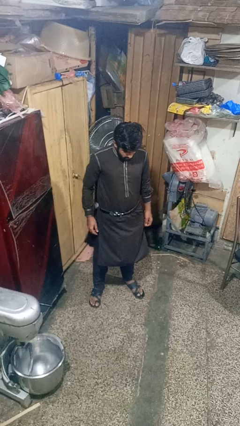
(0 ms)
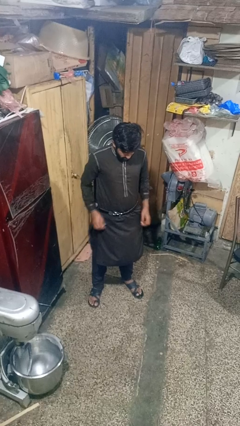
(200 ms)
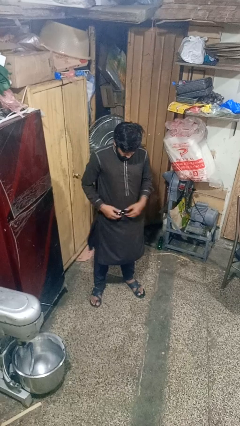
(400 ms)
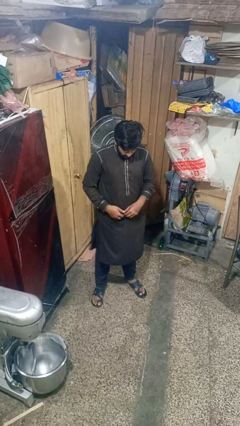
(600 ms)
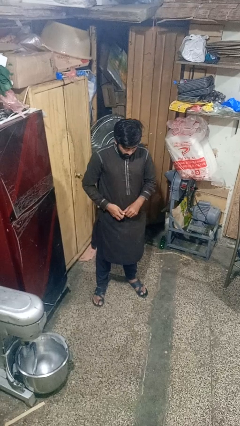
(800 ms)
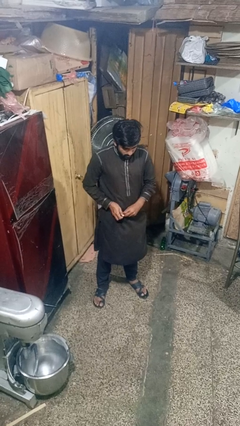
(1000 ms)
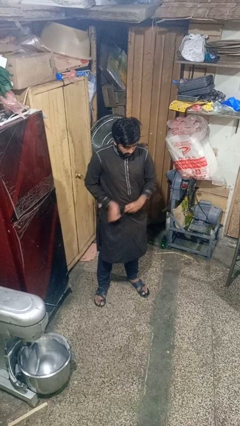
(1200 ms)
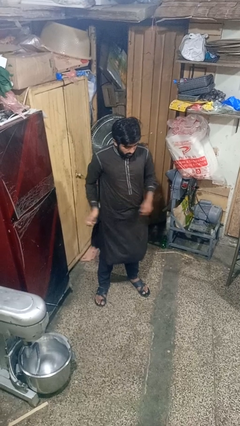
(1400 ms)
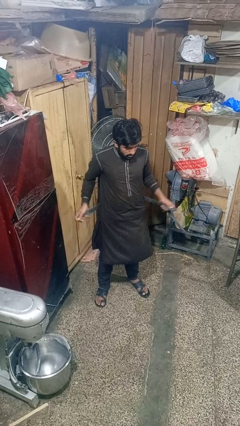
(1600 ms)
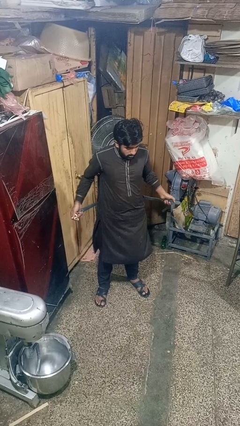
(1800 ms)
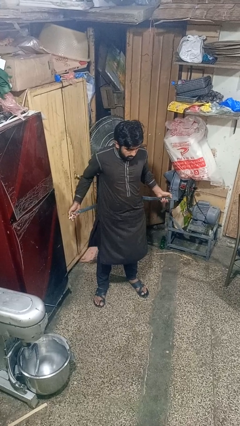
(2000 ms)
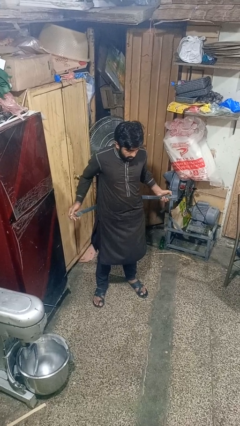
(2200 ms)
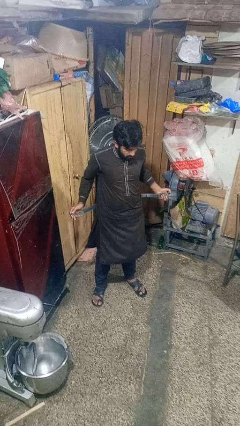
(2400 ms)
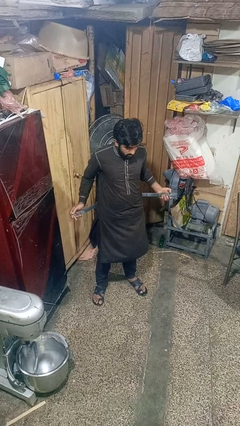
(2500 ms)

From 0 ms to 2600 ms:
person takes off belt

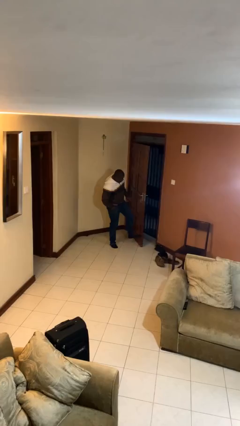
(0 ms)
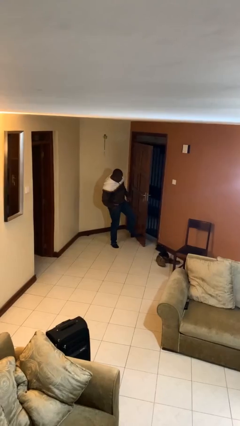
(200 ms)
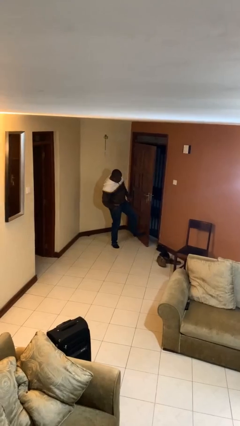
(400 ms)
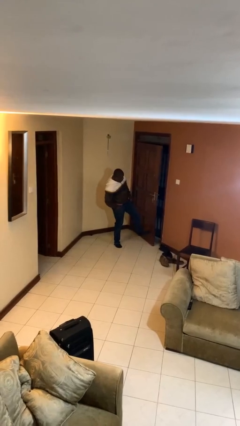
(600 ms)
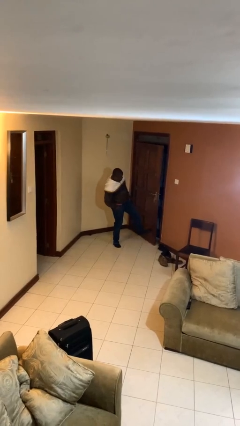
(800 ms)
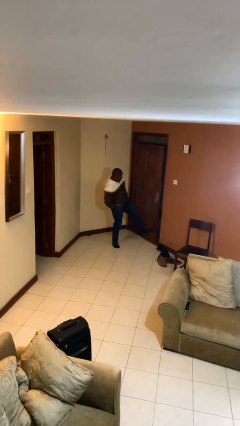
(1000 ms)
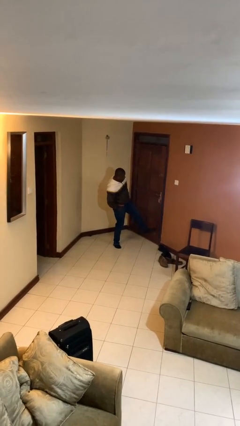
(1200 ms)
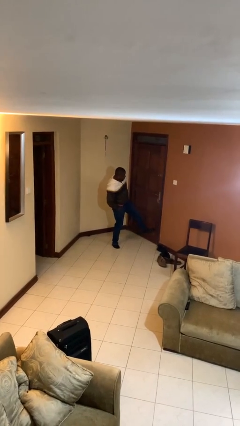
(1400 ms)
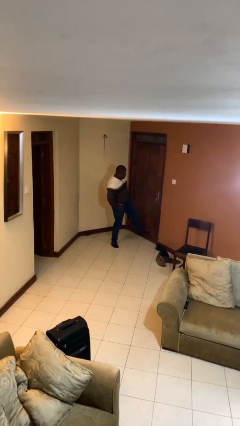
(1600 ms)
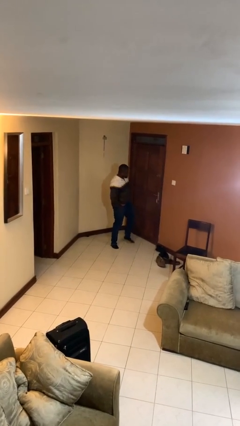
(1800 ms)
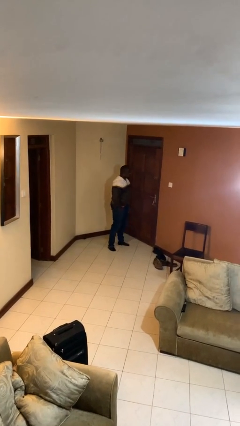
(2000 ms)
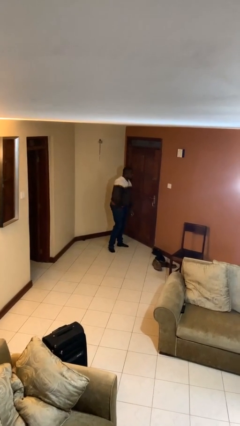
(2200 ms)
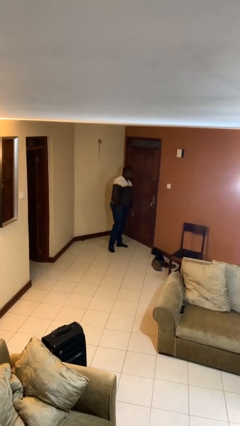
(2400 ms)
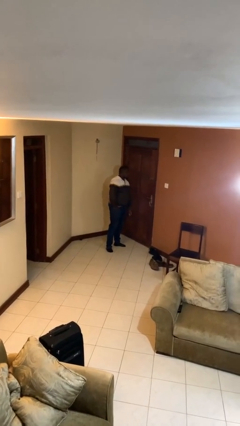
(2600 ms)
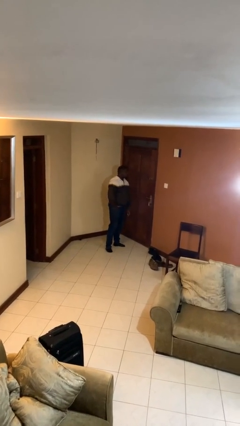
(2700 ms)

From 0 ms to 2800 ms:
person closes door with foot

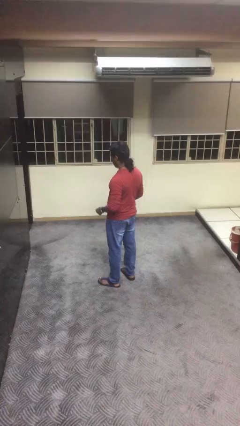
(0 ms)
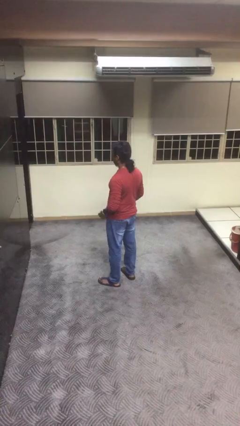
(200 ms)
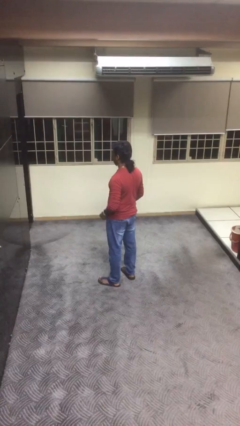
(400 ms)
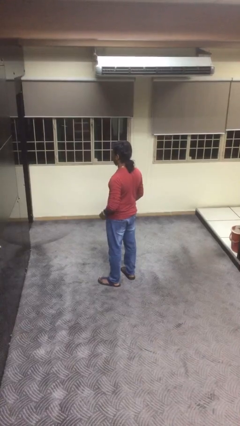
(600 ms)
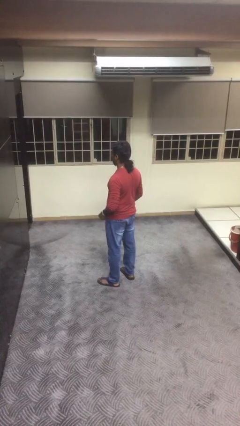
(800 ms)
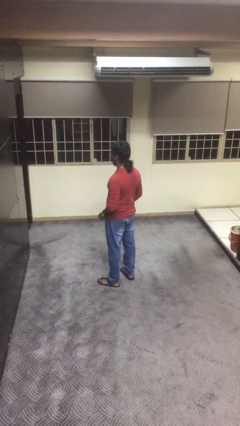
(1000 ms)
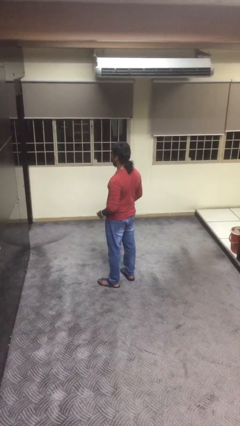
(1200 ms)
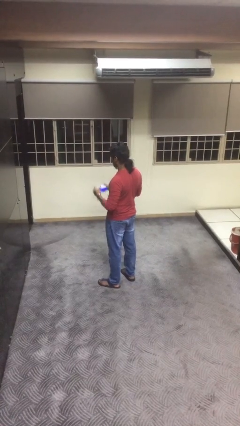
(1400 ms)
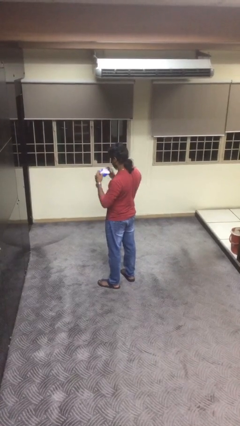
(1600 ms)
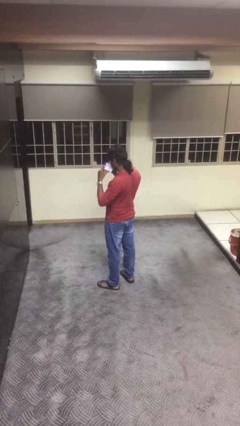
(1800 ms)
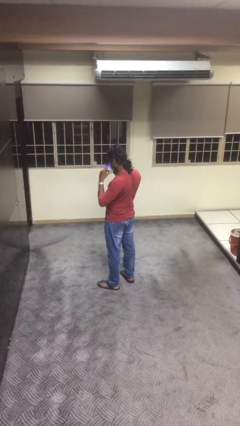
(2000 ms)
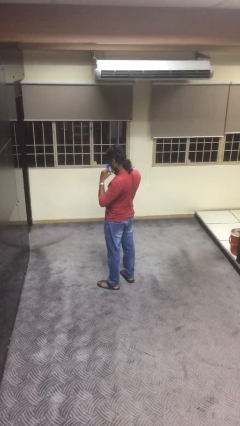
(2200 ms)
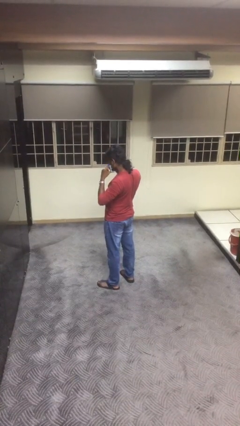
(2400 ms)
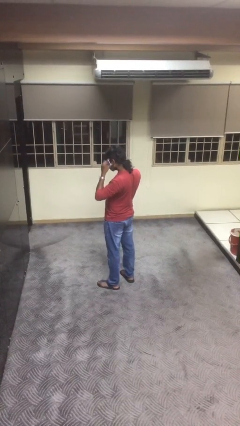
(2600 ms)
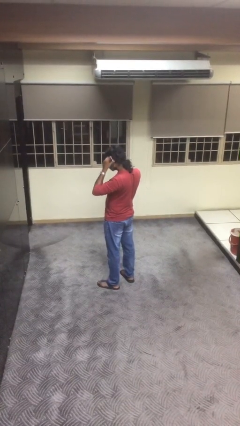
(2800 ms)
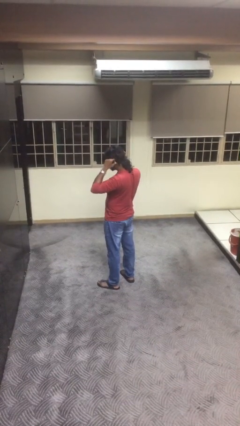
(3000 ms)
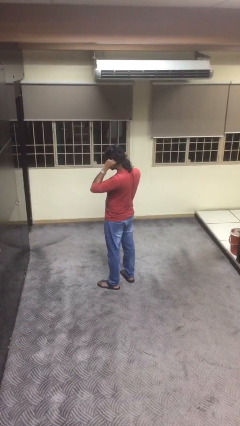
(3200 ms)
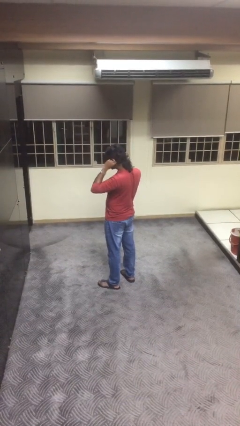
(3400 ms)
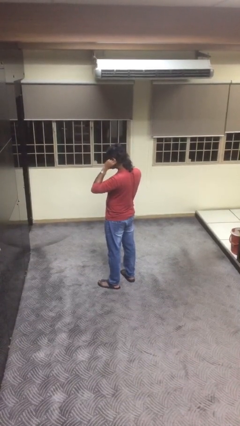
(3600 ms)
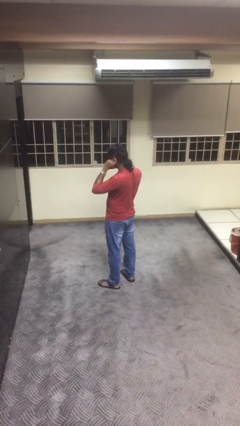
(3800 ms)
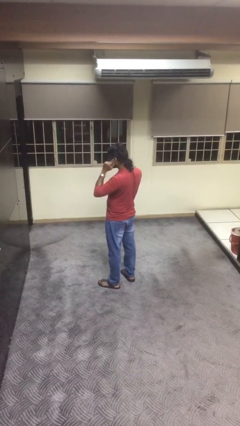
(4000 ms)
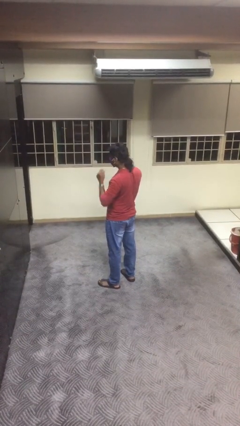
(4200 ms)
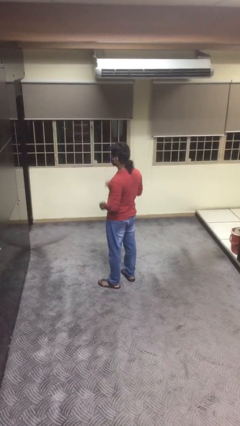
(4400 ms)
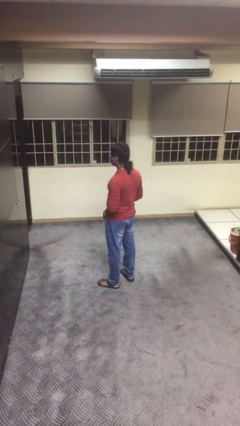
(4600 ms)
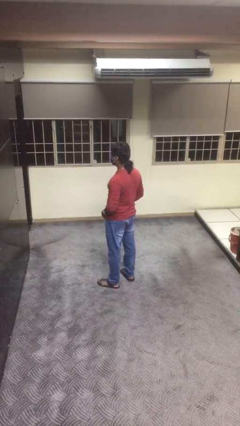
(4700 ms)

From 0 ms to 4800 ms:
person puts on facemask

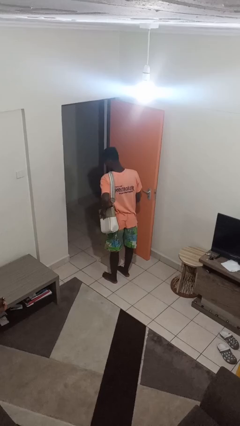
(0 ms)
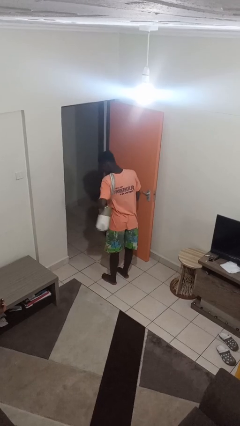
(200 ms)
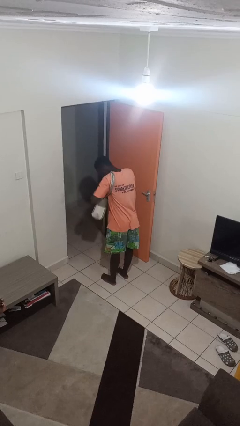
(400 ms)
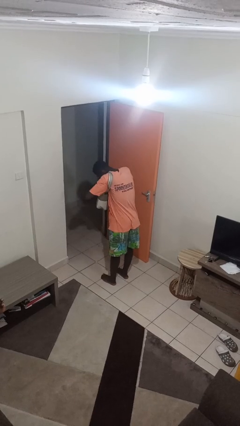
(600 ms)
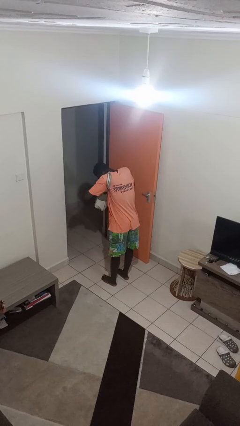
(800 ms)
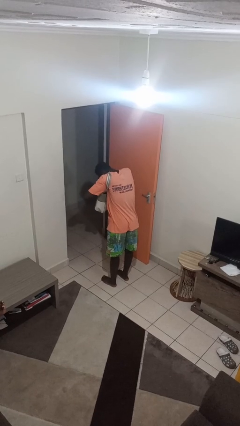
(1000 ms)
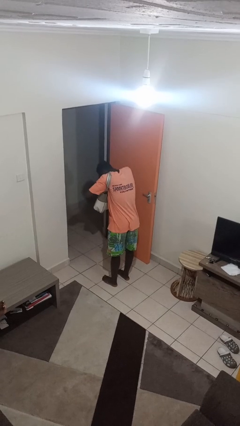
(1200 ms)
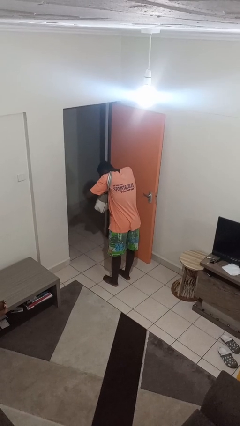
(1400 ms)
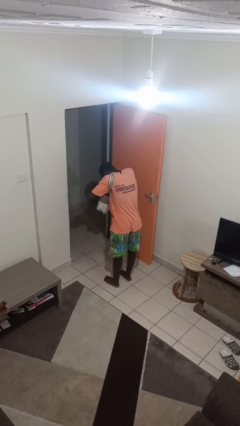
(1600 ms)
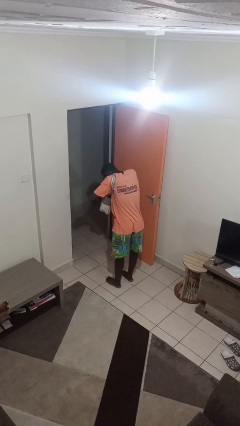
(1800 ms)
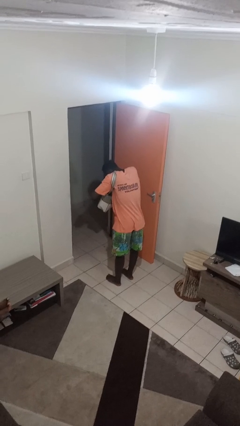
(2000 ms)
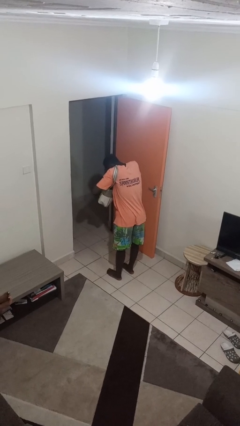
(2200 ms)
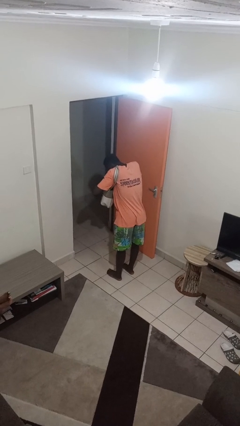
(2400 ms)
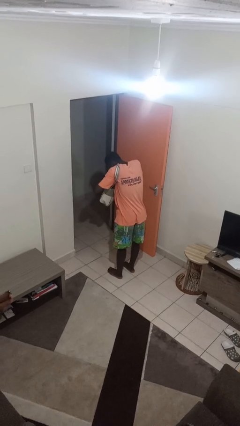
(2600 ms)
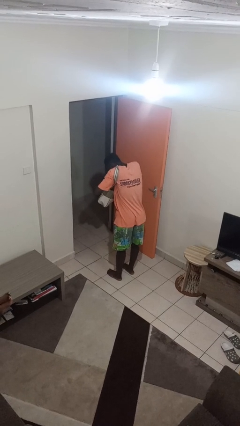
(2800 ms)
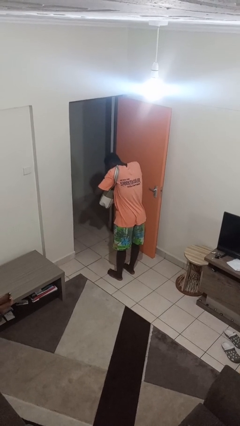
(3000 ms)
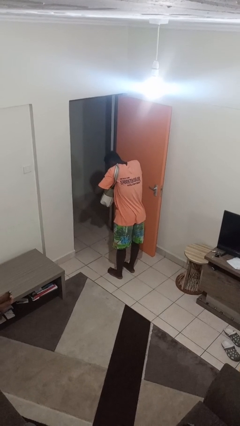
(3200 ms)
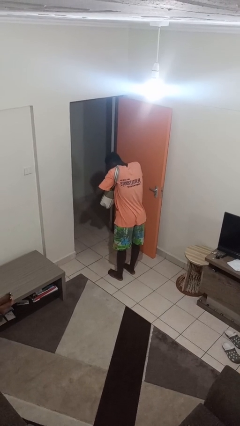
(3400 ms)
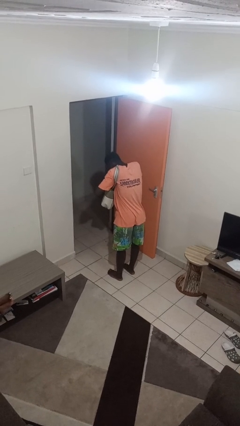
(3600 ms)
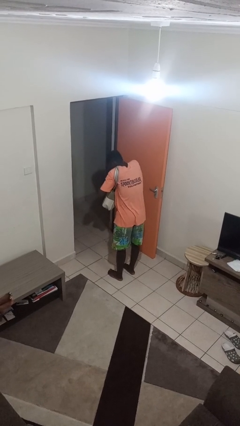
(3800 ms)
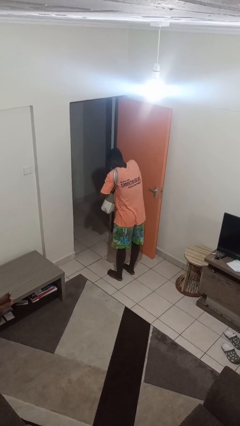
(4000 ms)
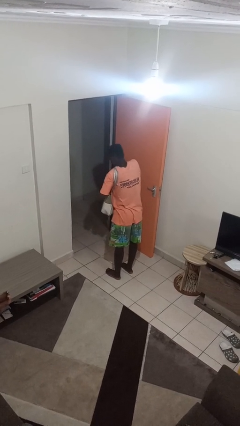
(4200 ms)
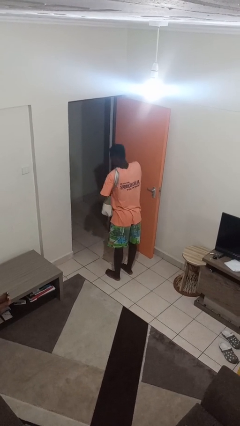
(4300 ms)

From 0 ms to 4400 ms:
person searches in purse

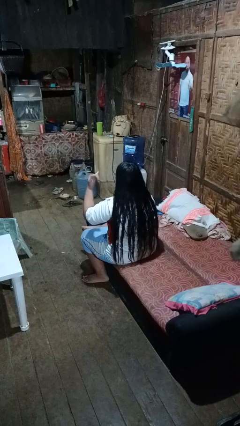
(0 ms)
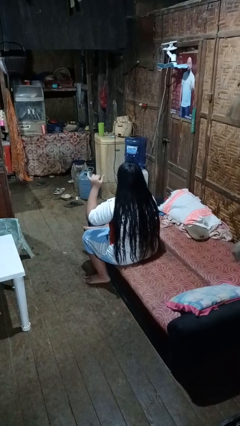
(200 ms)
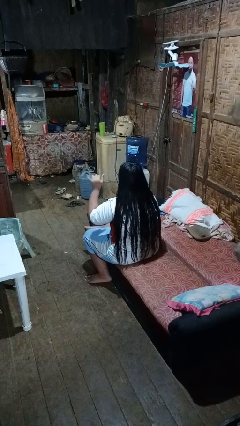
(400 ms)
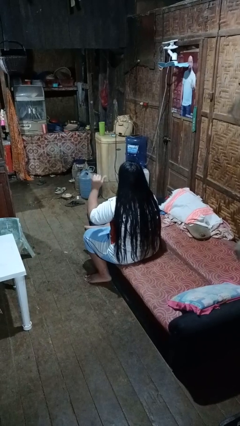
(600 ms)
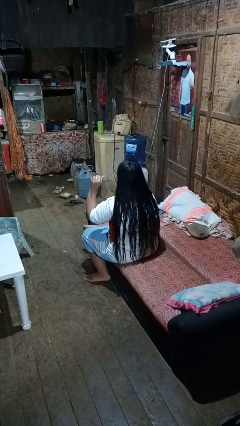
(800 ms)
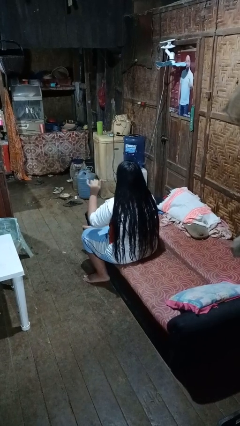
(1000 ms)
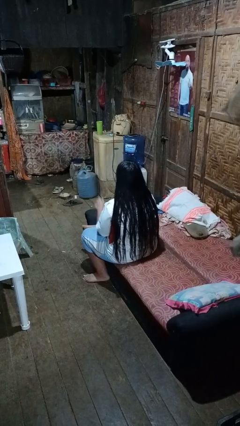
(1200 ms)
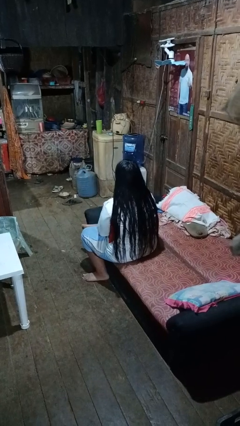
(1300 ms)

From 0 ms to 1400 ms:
person gestures hang loose

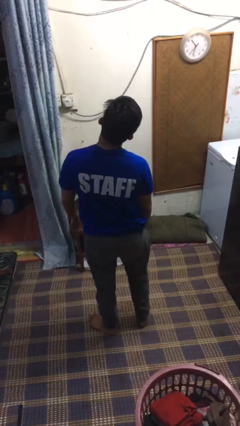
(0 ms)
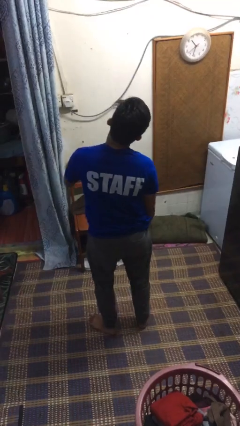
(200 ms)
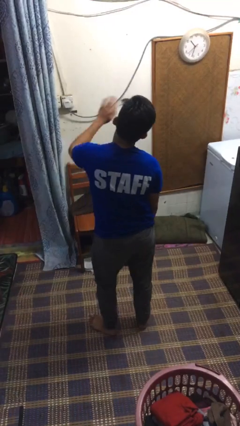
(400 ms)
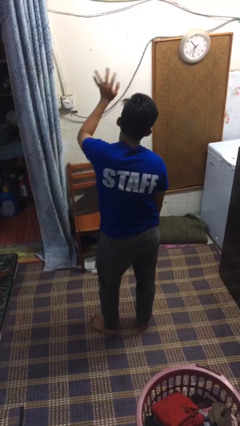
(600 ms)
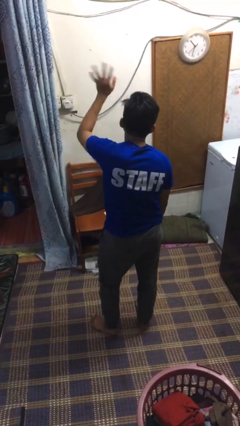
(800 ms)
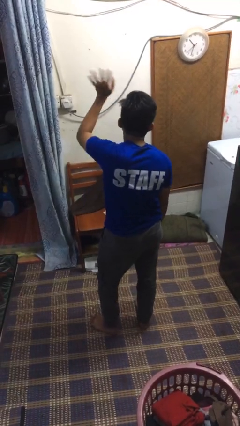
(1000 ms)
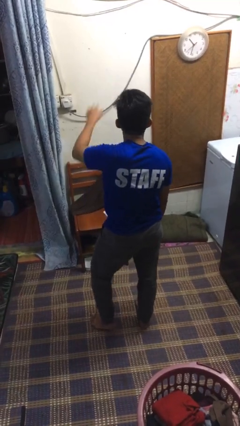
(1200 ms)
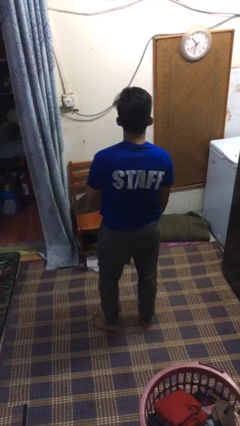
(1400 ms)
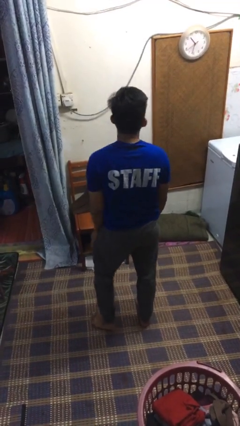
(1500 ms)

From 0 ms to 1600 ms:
person waves at person
